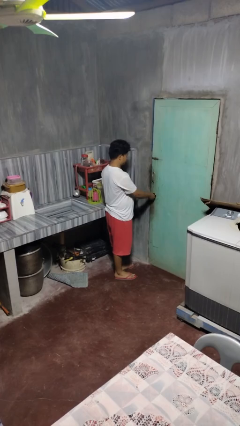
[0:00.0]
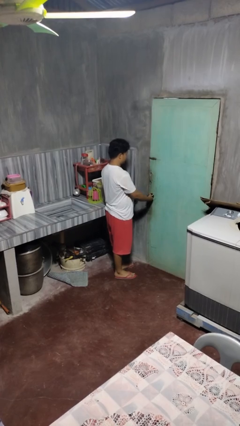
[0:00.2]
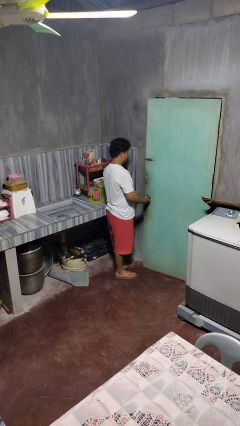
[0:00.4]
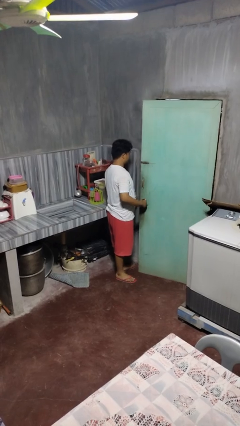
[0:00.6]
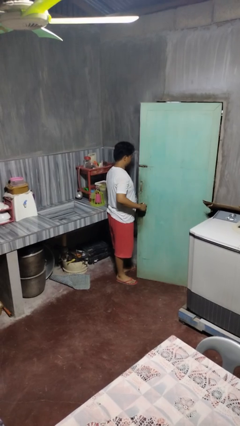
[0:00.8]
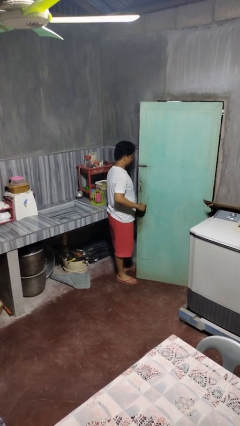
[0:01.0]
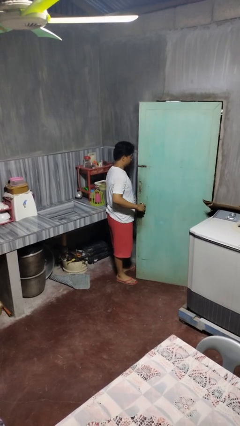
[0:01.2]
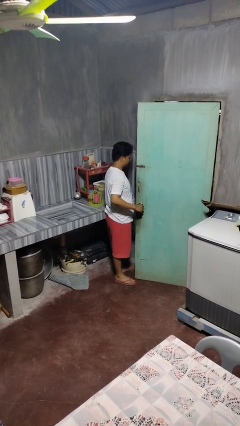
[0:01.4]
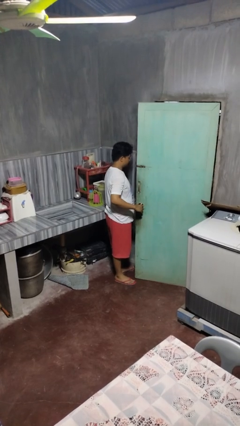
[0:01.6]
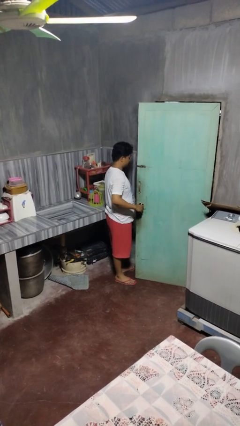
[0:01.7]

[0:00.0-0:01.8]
person opens facility door

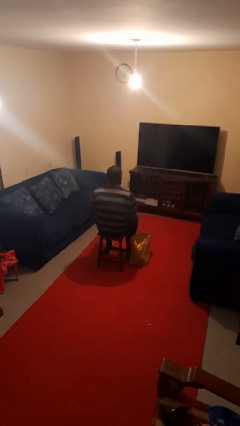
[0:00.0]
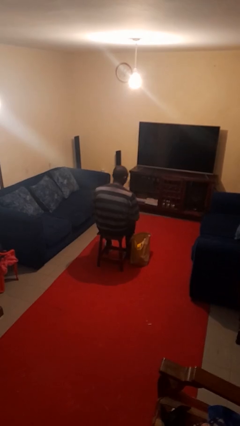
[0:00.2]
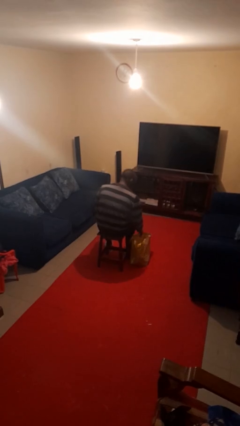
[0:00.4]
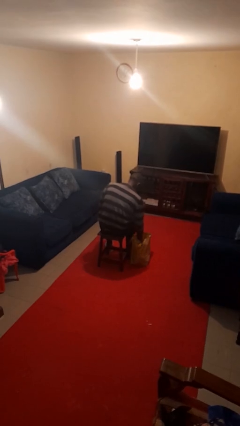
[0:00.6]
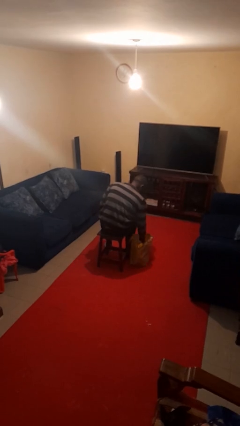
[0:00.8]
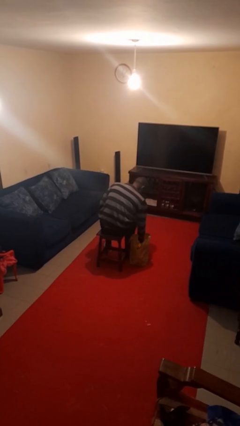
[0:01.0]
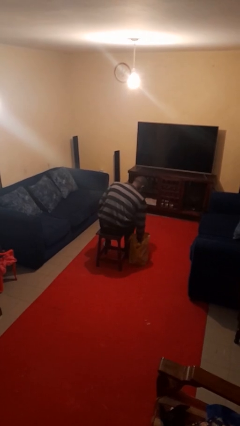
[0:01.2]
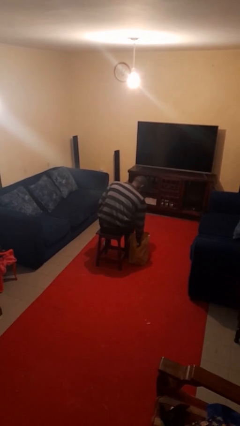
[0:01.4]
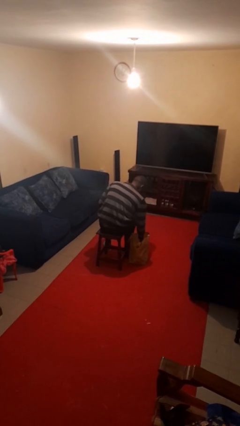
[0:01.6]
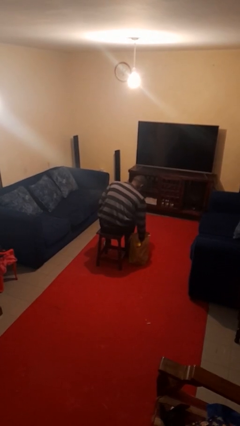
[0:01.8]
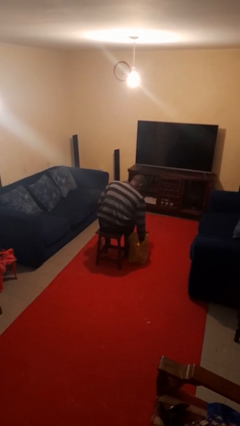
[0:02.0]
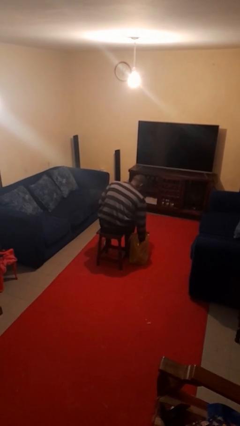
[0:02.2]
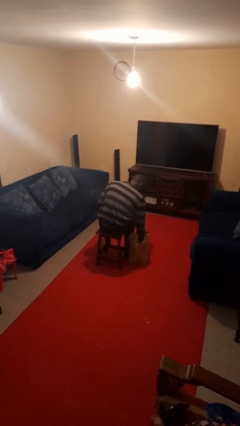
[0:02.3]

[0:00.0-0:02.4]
person searches in bag

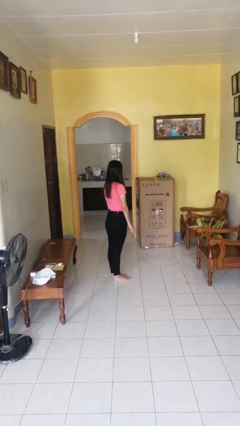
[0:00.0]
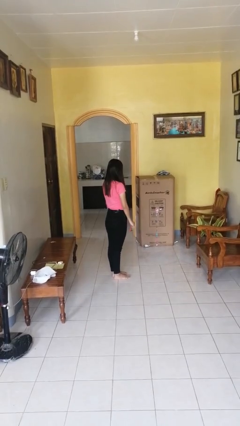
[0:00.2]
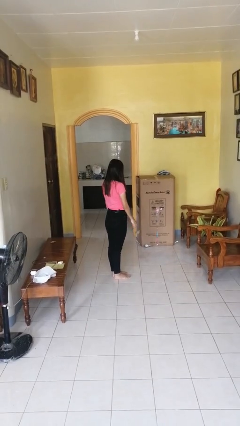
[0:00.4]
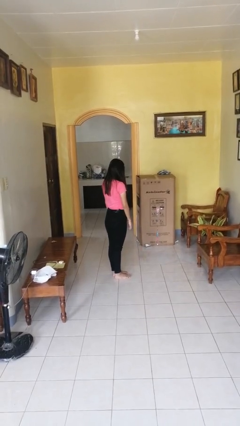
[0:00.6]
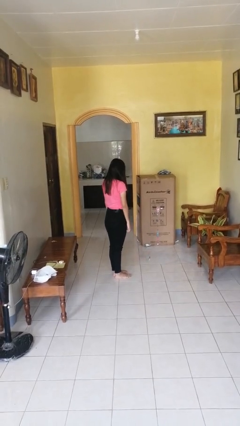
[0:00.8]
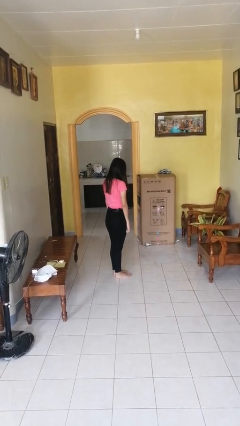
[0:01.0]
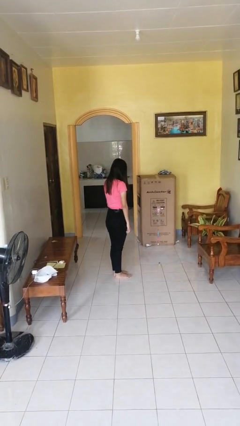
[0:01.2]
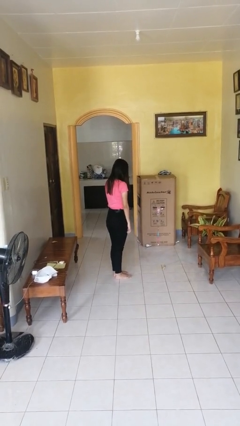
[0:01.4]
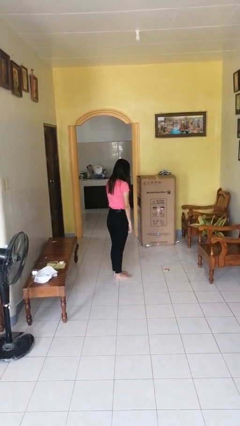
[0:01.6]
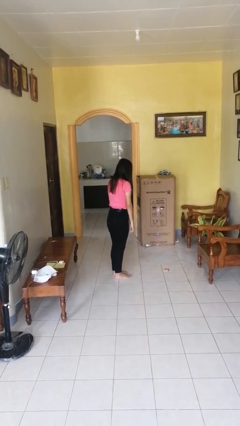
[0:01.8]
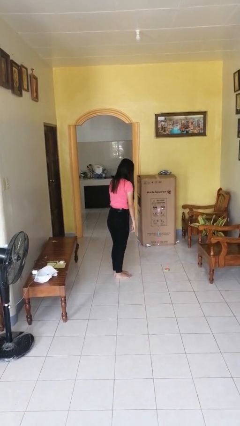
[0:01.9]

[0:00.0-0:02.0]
person throws object to ground

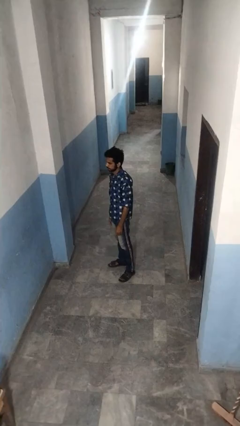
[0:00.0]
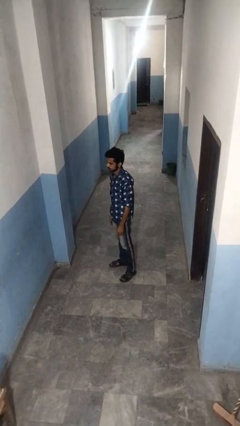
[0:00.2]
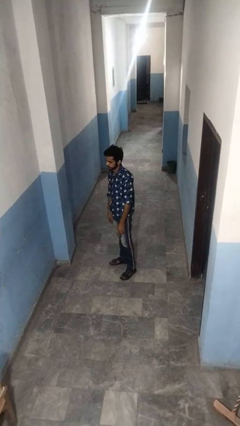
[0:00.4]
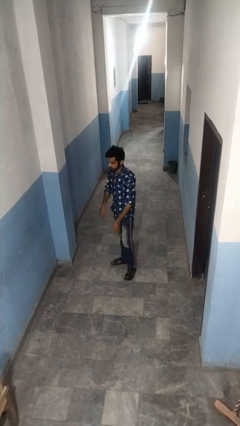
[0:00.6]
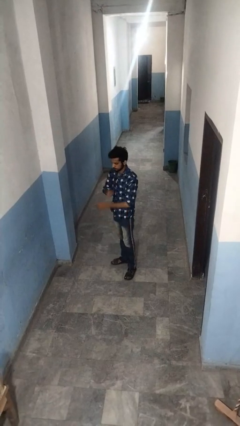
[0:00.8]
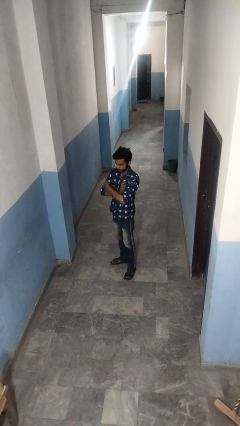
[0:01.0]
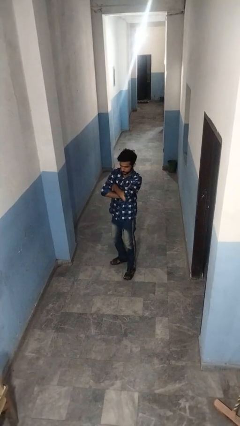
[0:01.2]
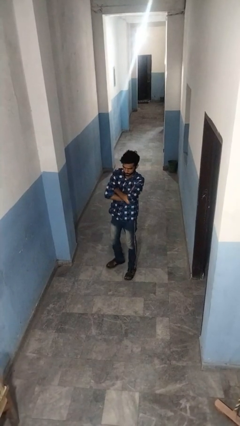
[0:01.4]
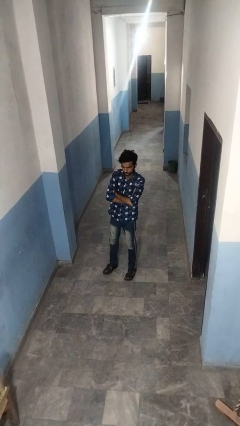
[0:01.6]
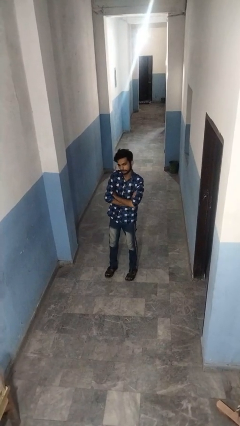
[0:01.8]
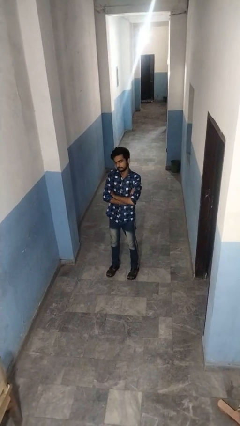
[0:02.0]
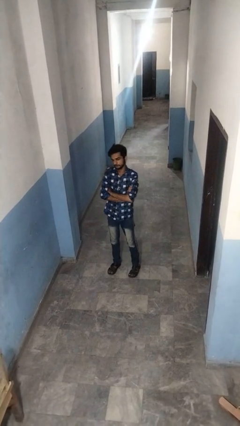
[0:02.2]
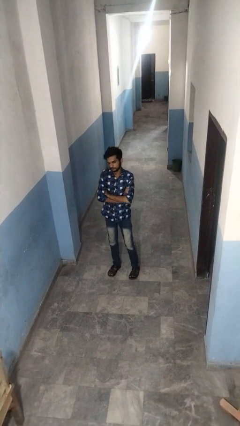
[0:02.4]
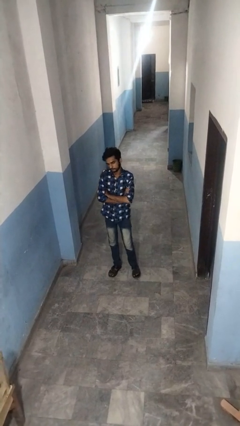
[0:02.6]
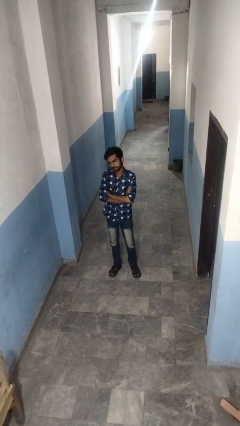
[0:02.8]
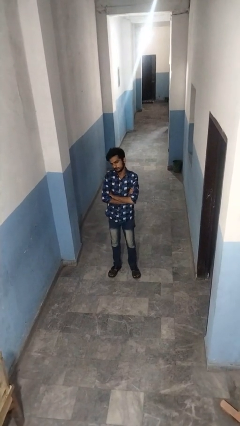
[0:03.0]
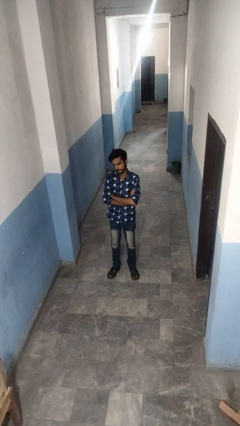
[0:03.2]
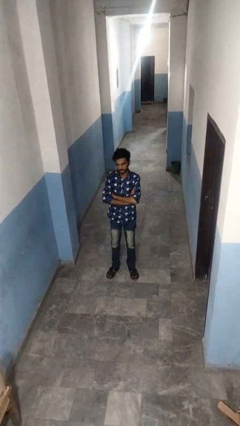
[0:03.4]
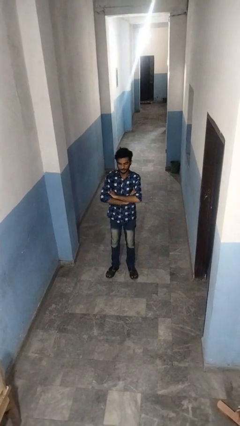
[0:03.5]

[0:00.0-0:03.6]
person crosses arms

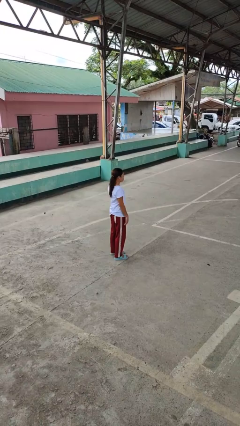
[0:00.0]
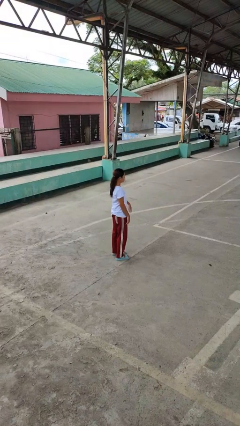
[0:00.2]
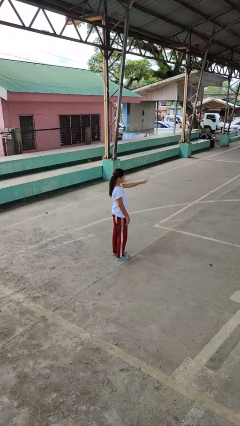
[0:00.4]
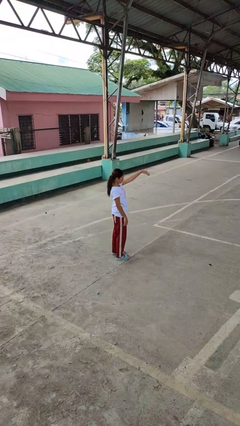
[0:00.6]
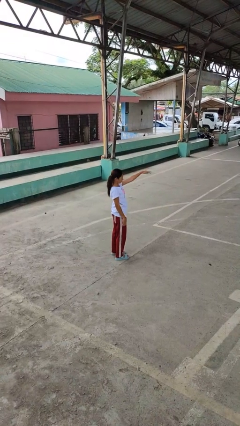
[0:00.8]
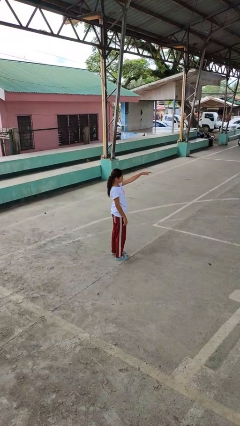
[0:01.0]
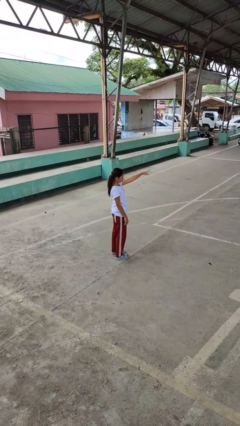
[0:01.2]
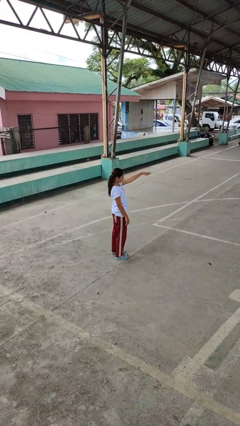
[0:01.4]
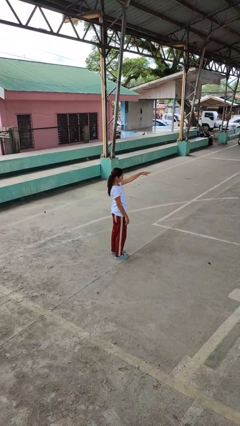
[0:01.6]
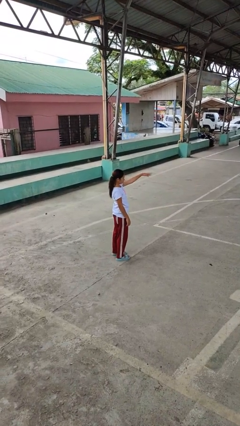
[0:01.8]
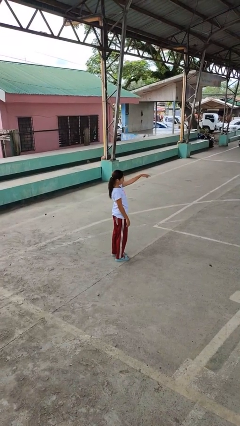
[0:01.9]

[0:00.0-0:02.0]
person gestures come here

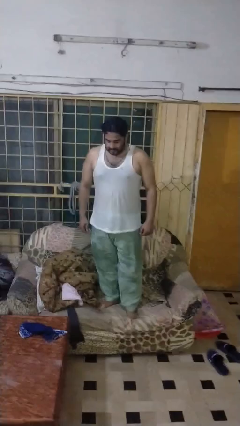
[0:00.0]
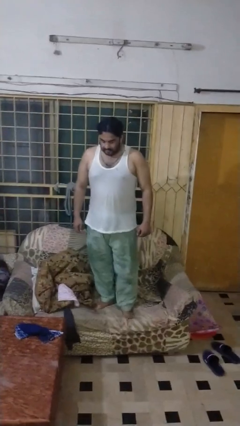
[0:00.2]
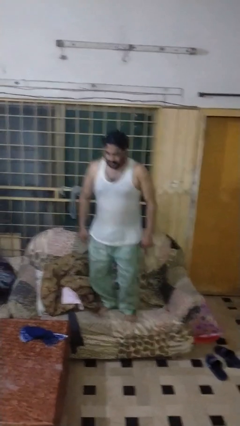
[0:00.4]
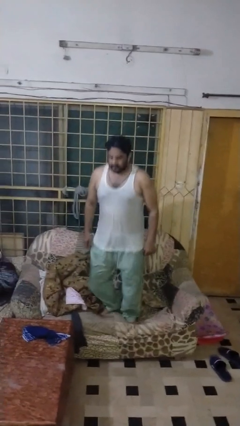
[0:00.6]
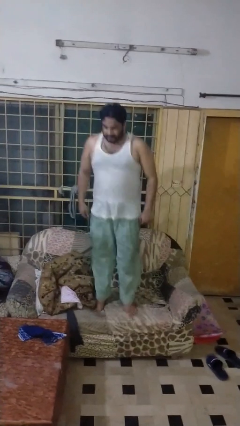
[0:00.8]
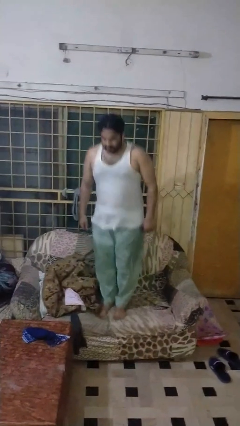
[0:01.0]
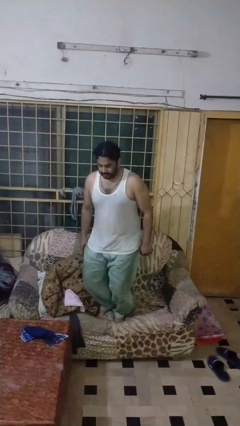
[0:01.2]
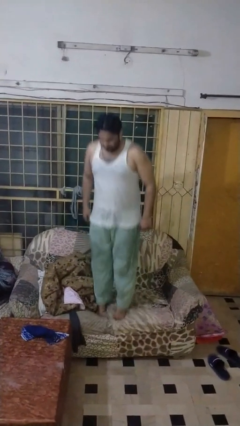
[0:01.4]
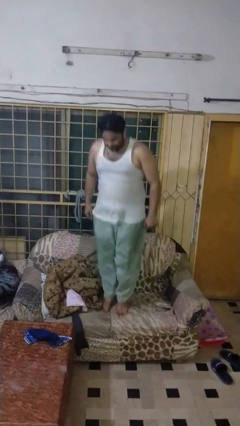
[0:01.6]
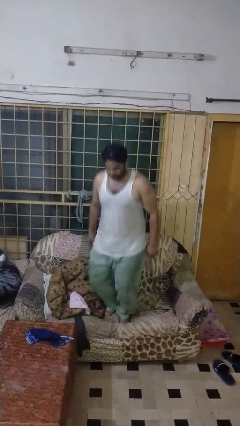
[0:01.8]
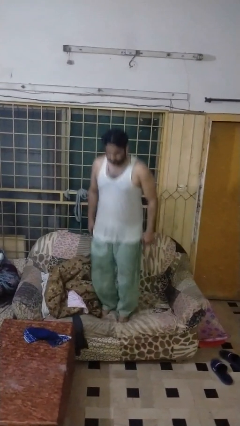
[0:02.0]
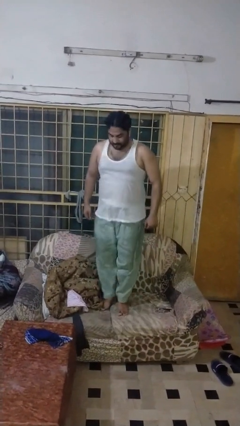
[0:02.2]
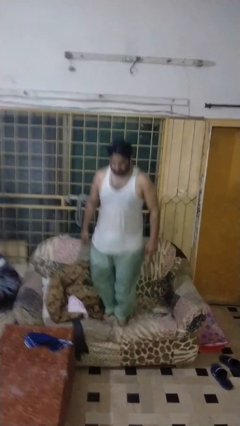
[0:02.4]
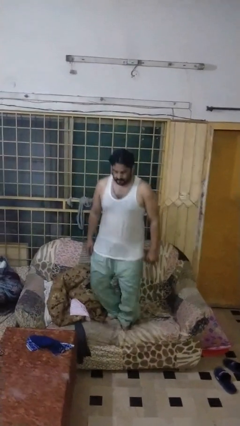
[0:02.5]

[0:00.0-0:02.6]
person jumps on couch

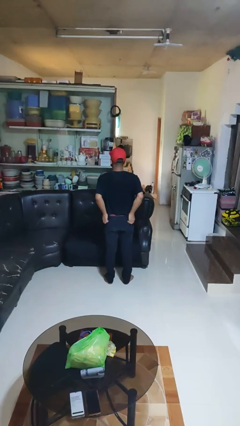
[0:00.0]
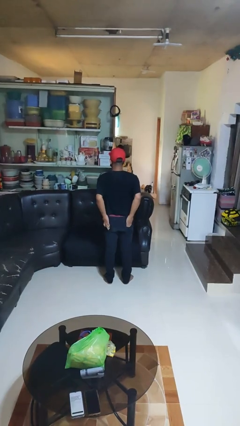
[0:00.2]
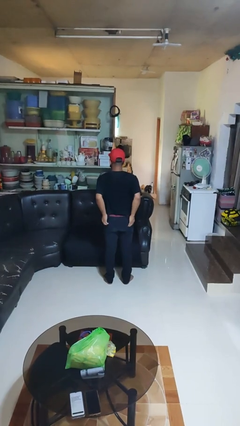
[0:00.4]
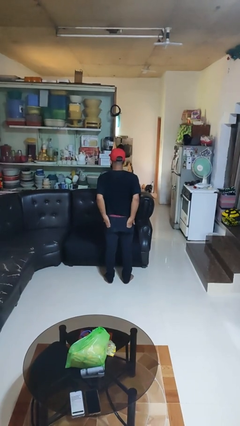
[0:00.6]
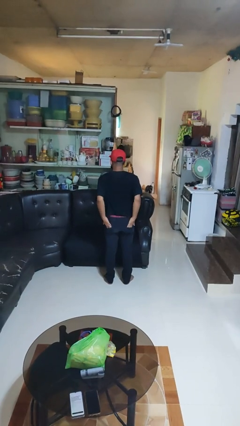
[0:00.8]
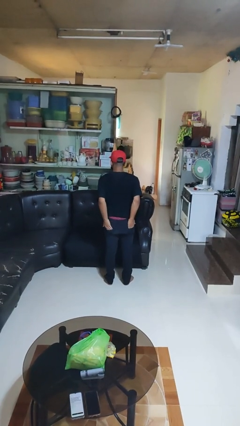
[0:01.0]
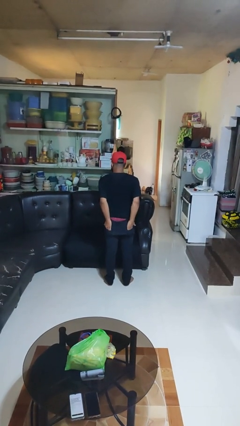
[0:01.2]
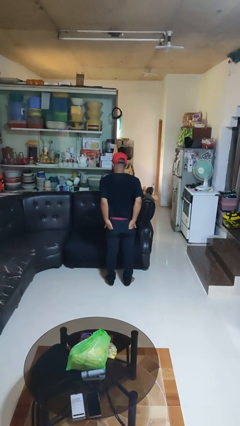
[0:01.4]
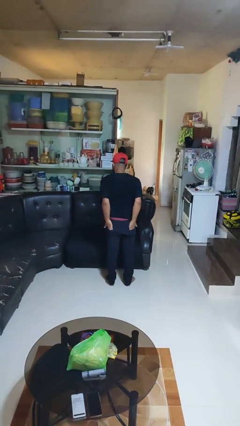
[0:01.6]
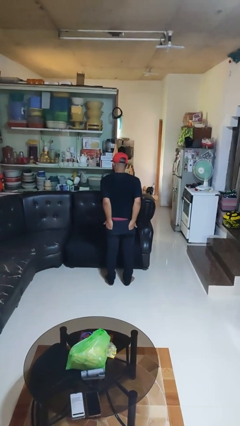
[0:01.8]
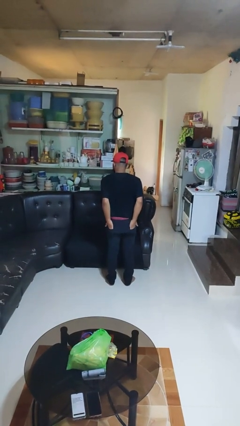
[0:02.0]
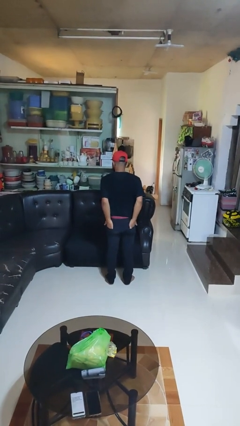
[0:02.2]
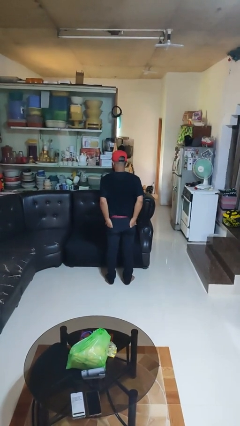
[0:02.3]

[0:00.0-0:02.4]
person puts hands in back pockets
